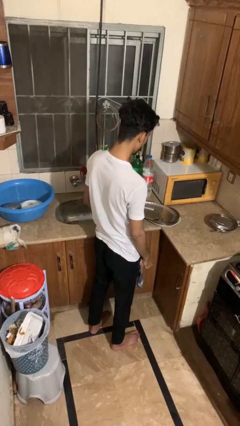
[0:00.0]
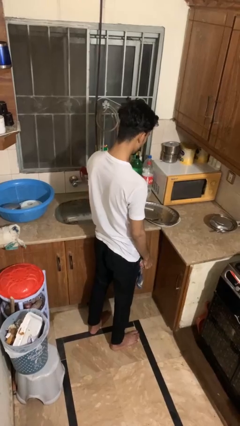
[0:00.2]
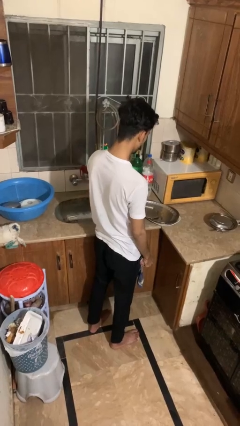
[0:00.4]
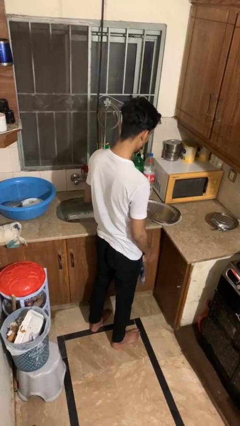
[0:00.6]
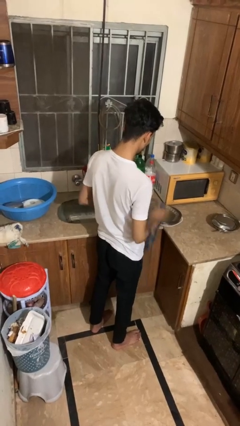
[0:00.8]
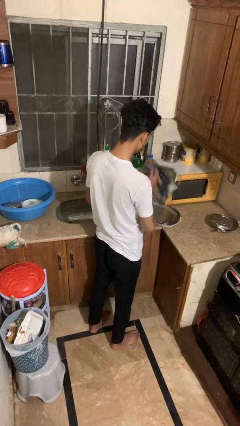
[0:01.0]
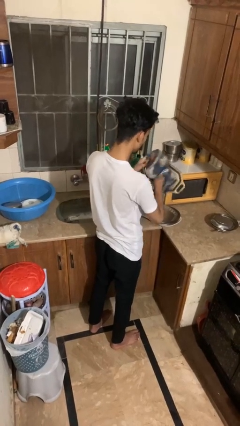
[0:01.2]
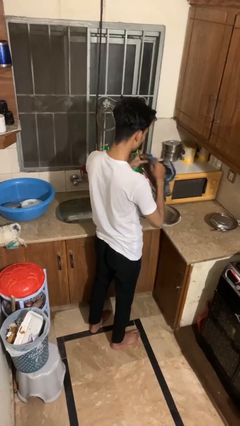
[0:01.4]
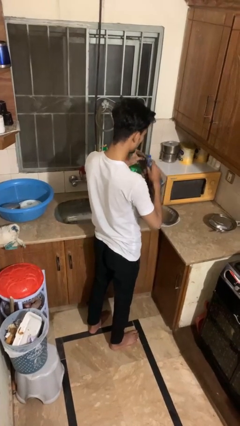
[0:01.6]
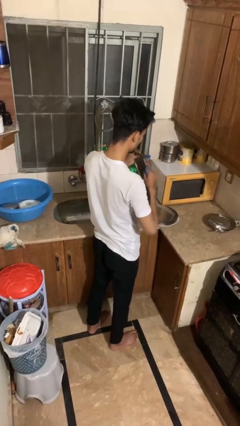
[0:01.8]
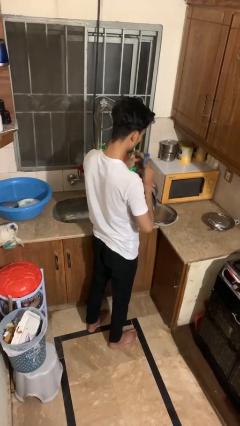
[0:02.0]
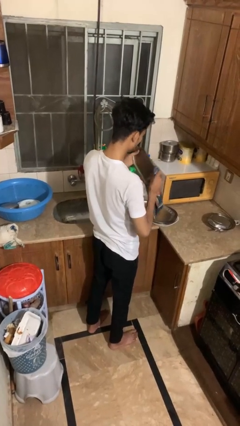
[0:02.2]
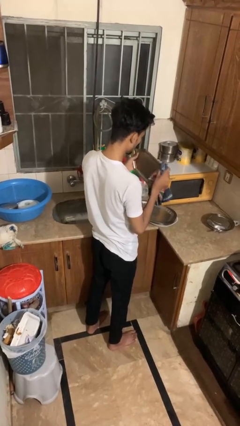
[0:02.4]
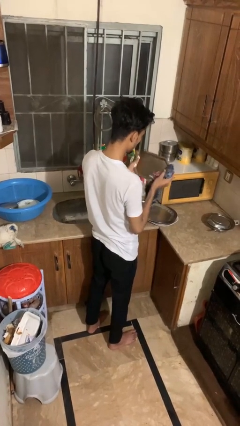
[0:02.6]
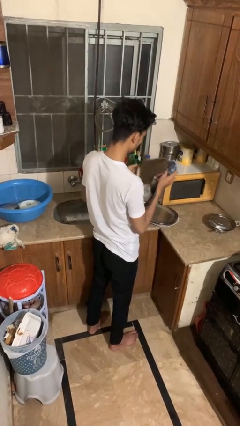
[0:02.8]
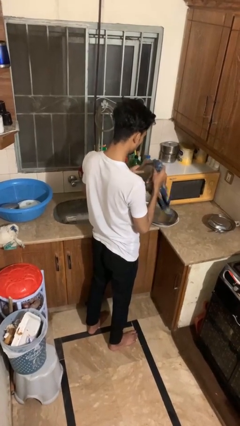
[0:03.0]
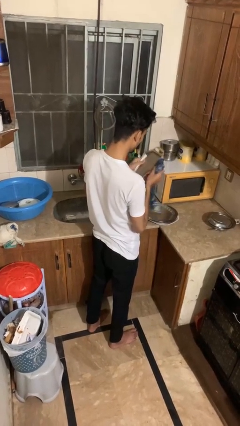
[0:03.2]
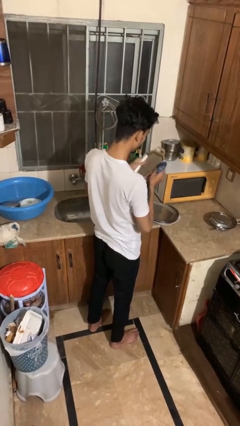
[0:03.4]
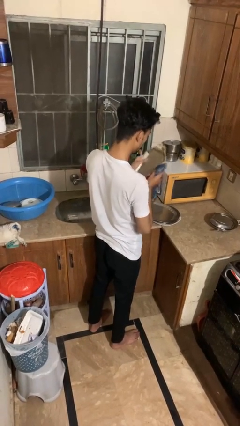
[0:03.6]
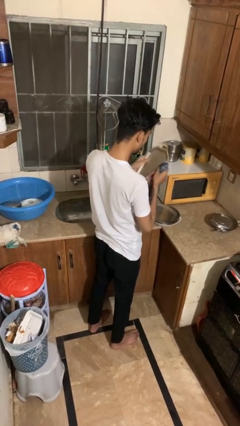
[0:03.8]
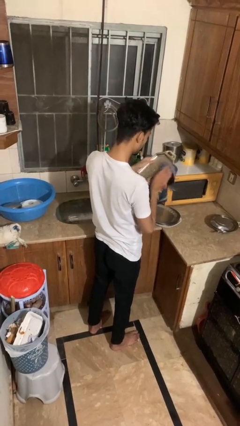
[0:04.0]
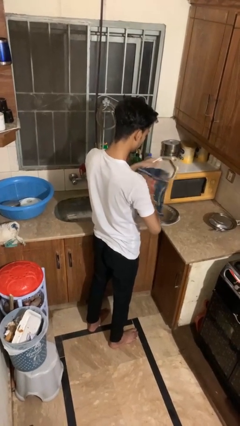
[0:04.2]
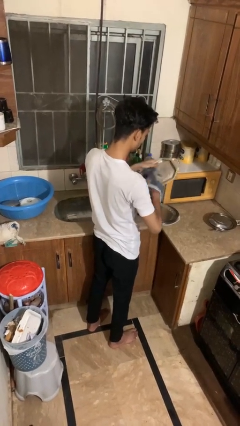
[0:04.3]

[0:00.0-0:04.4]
person dries dish

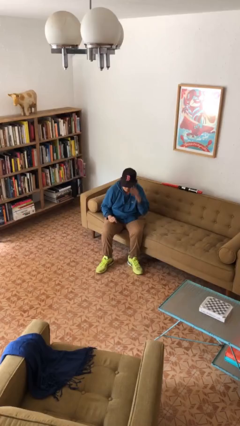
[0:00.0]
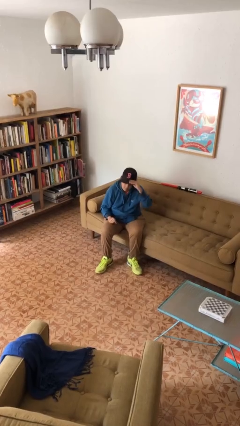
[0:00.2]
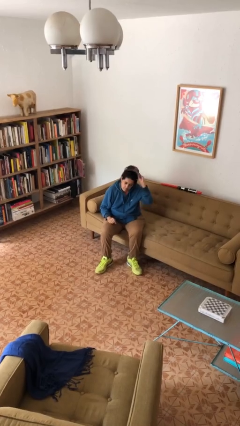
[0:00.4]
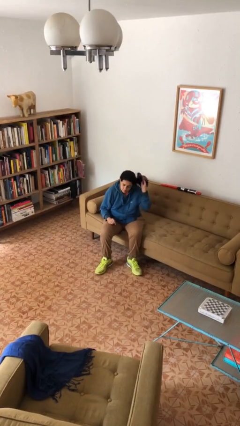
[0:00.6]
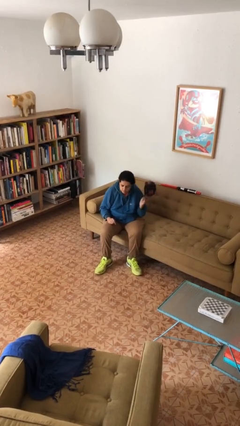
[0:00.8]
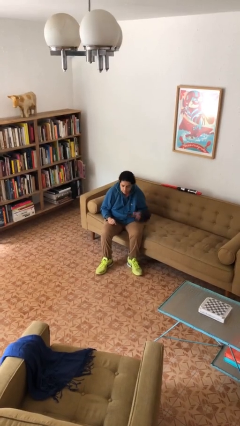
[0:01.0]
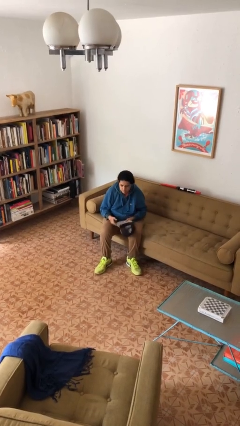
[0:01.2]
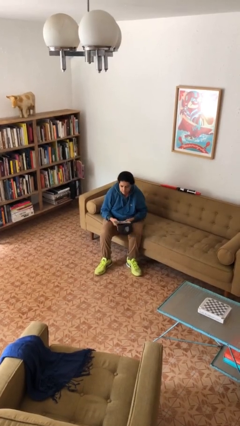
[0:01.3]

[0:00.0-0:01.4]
person takes off hat

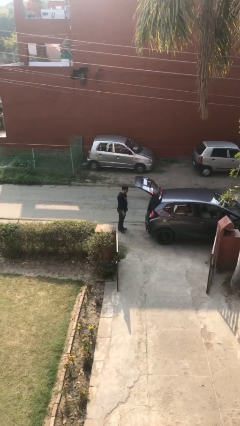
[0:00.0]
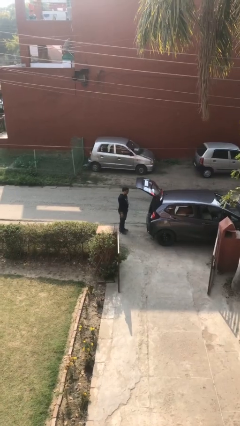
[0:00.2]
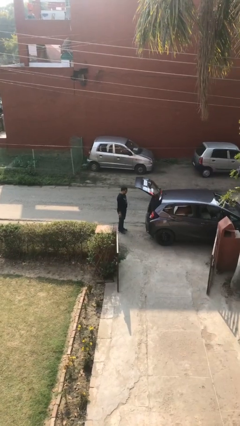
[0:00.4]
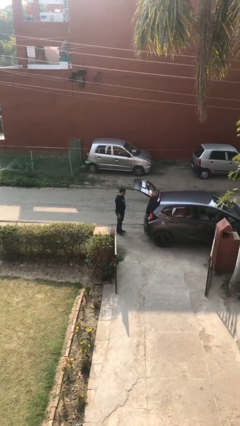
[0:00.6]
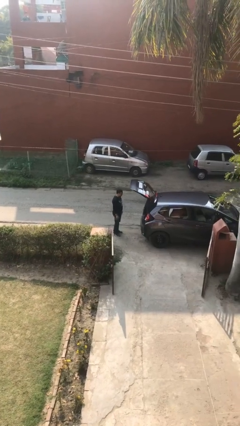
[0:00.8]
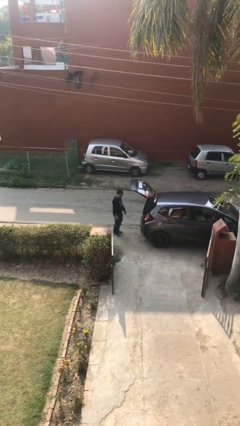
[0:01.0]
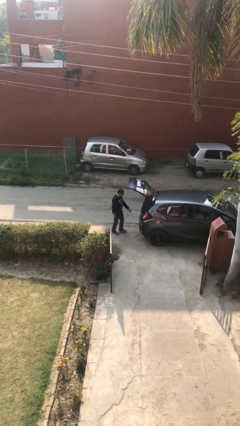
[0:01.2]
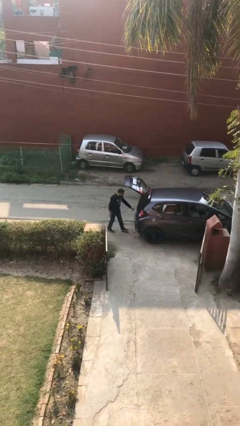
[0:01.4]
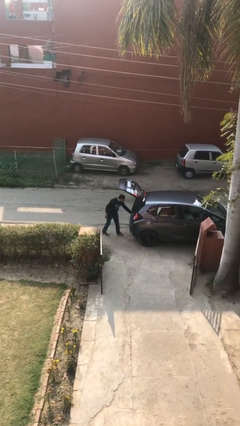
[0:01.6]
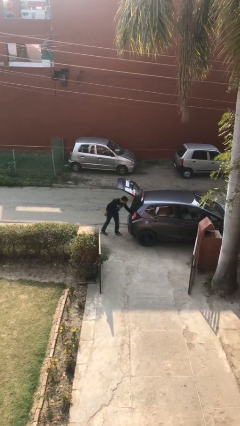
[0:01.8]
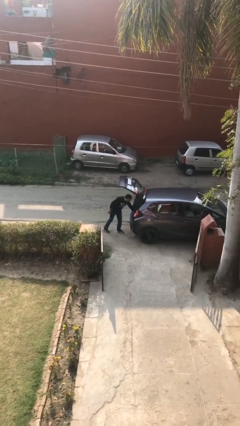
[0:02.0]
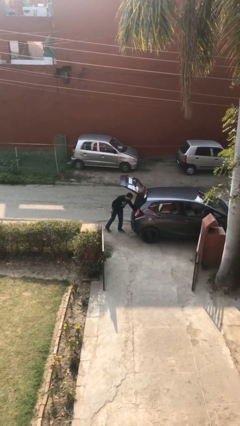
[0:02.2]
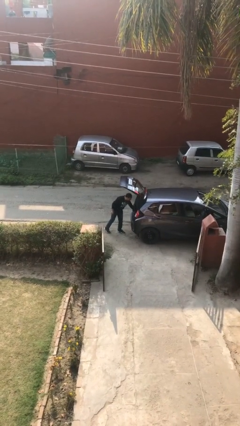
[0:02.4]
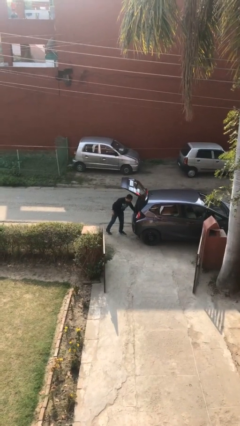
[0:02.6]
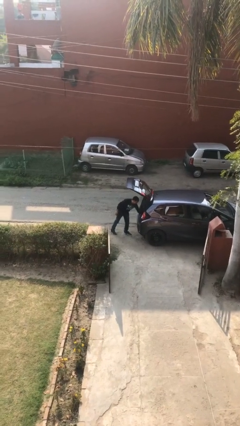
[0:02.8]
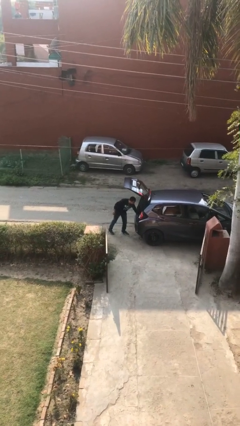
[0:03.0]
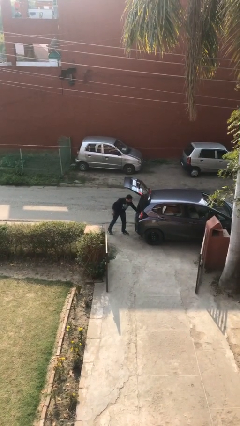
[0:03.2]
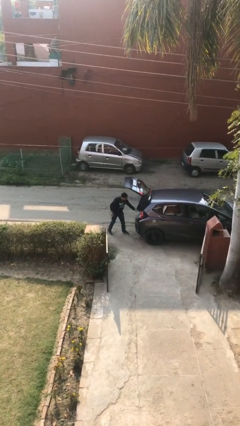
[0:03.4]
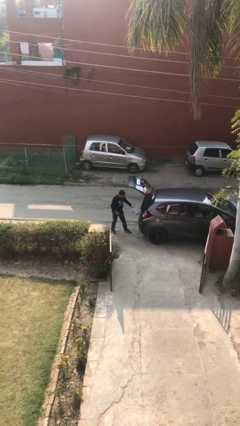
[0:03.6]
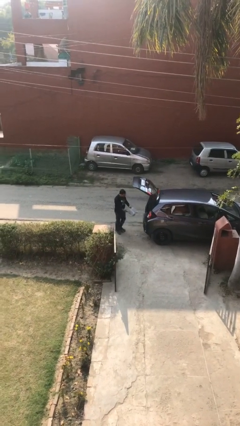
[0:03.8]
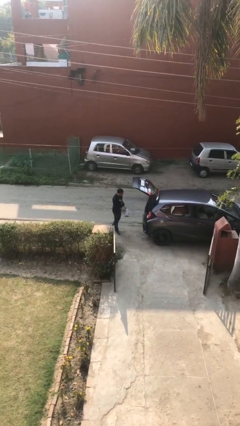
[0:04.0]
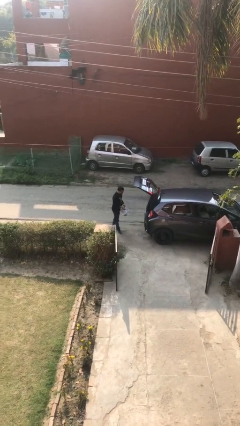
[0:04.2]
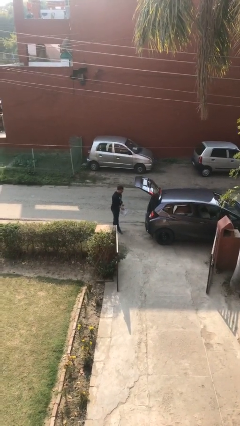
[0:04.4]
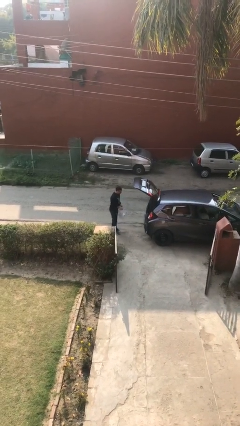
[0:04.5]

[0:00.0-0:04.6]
person unloads car

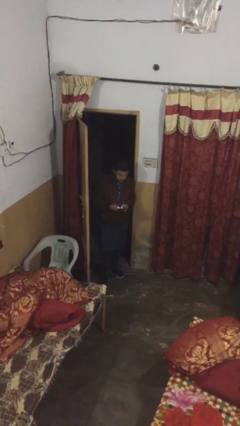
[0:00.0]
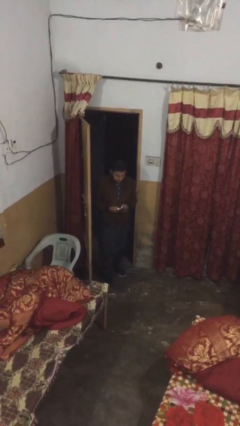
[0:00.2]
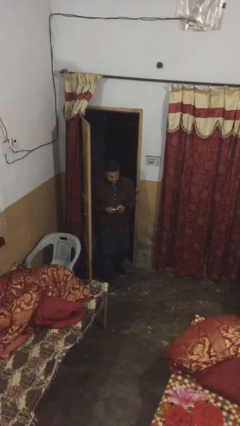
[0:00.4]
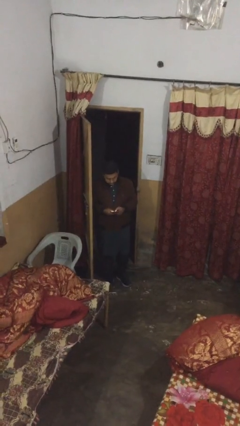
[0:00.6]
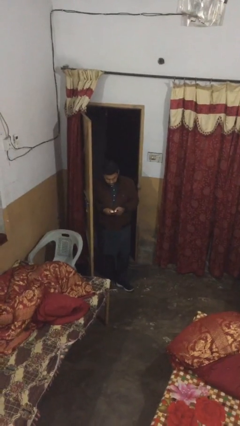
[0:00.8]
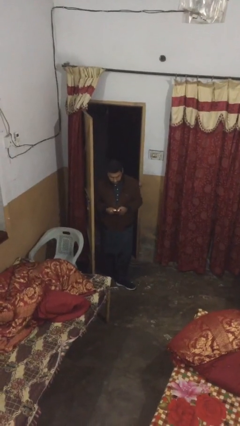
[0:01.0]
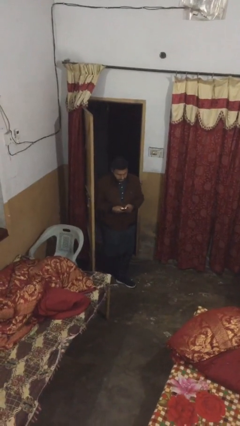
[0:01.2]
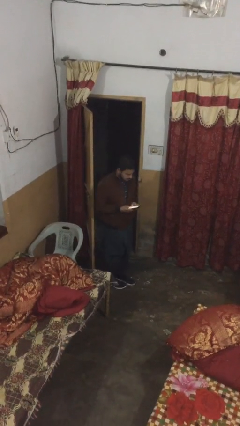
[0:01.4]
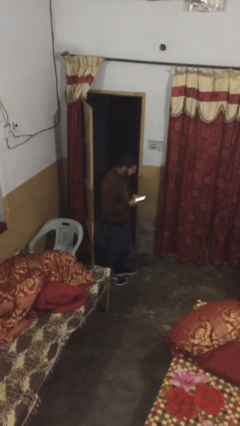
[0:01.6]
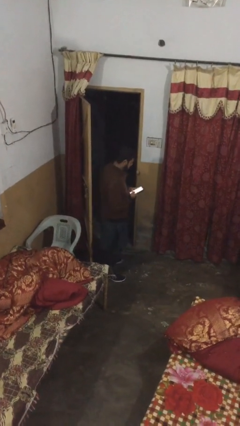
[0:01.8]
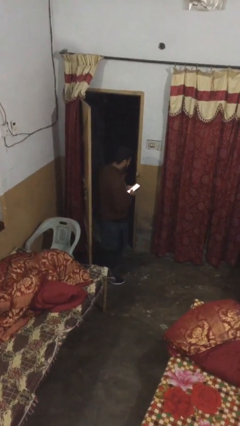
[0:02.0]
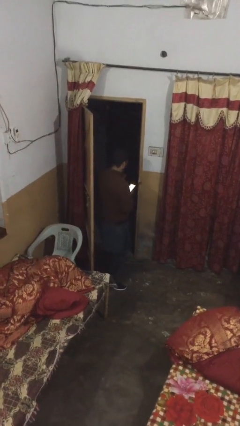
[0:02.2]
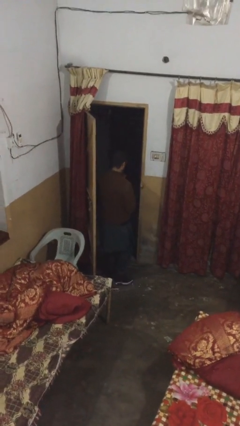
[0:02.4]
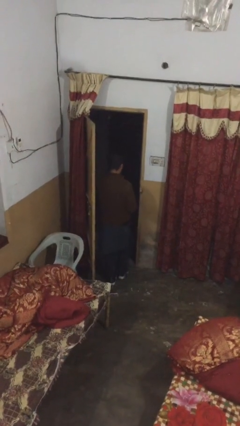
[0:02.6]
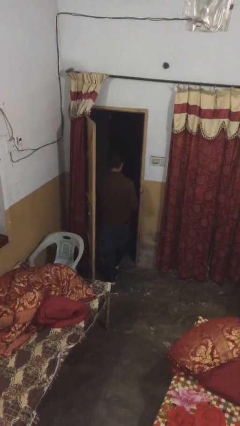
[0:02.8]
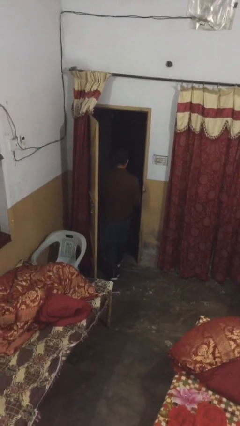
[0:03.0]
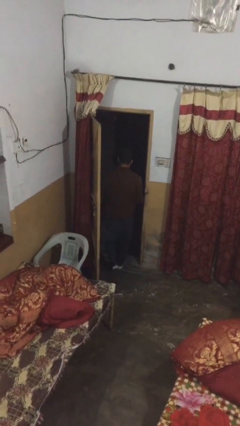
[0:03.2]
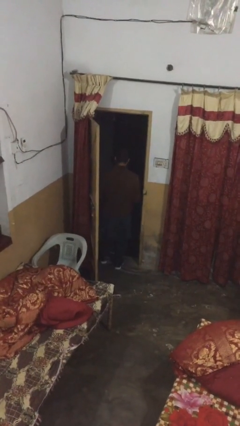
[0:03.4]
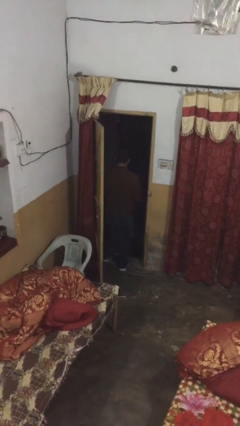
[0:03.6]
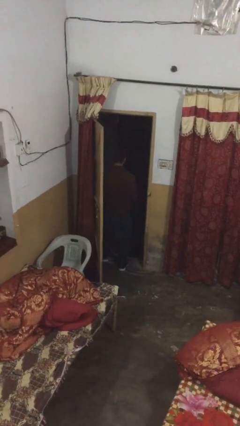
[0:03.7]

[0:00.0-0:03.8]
person exits scene through structure

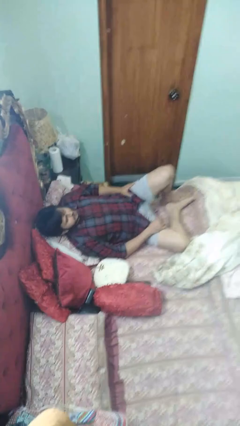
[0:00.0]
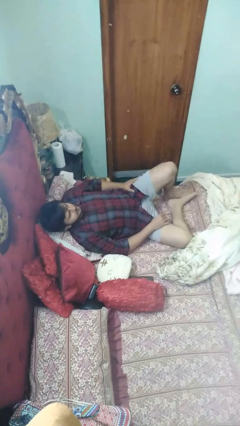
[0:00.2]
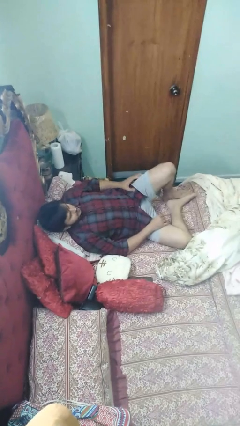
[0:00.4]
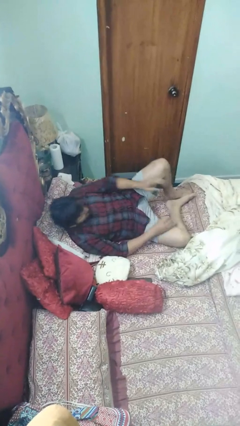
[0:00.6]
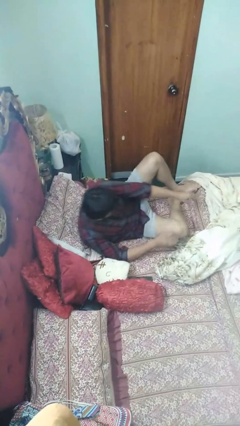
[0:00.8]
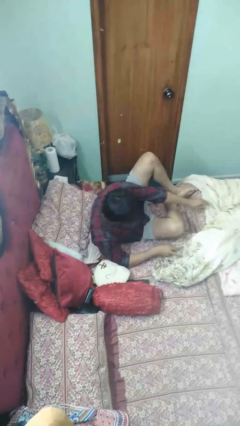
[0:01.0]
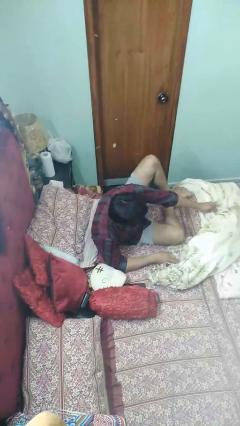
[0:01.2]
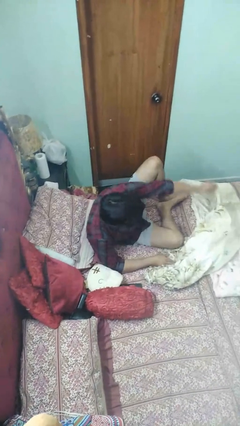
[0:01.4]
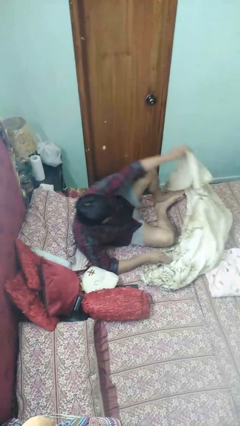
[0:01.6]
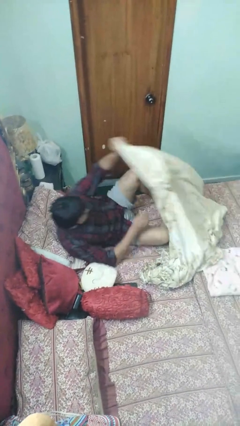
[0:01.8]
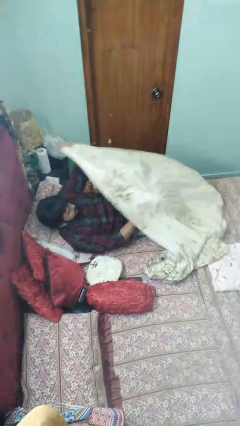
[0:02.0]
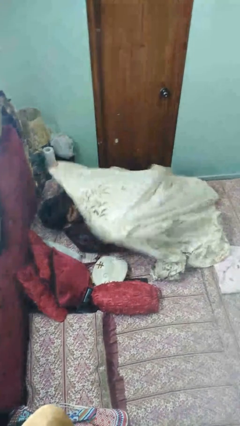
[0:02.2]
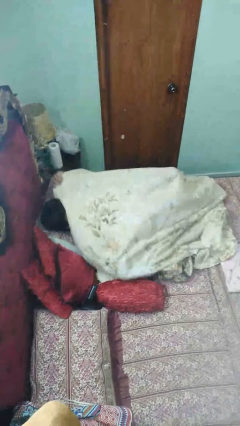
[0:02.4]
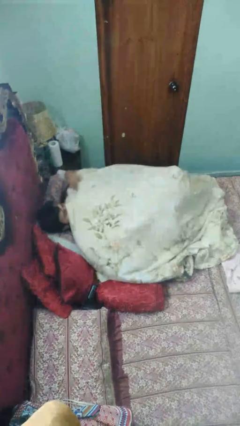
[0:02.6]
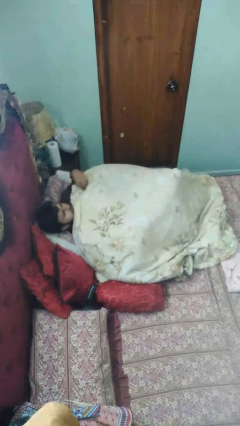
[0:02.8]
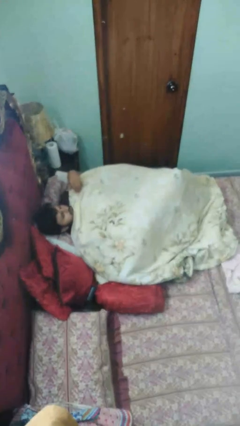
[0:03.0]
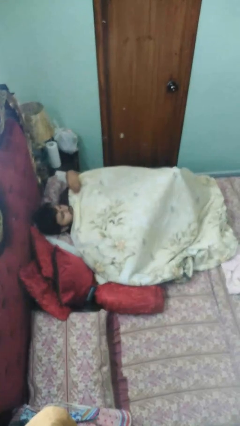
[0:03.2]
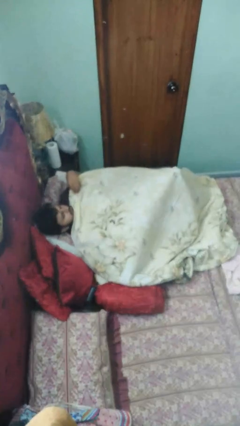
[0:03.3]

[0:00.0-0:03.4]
person covers with bedsheets
